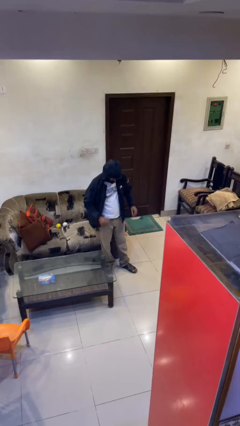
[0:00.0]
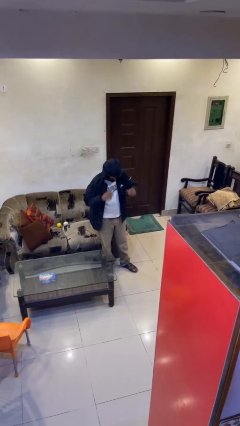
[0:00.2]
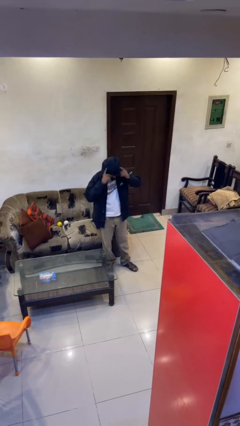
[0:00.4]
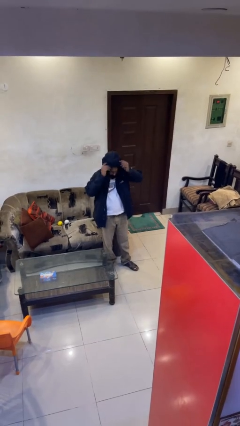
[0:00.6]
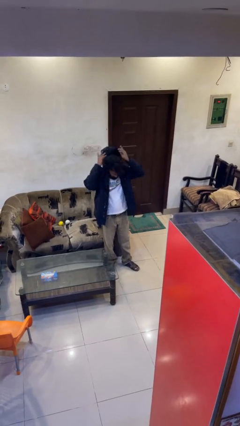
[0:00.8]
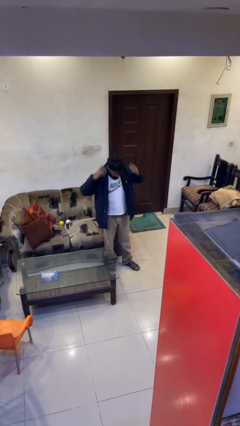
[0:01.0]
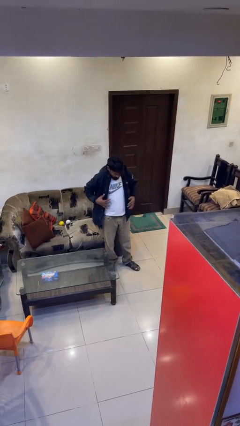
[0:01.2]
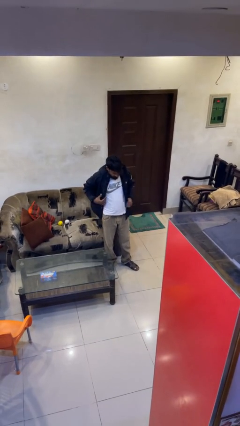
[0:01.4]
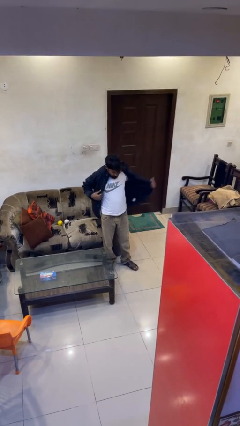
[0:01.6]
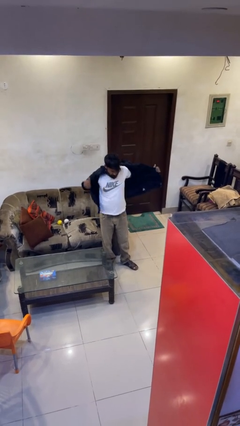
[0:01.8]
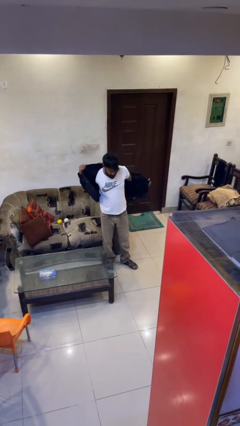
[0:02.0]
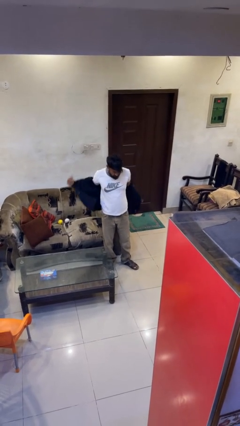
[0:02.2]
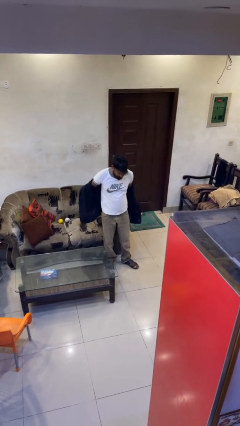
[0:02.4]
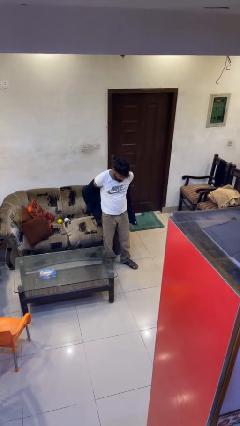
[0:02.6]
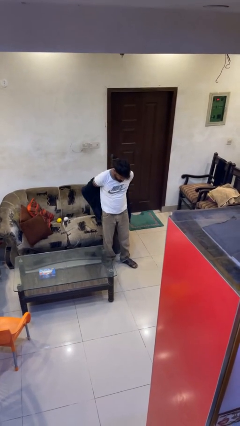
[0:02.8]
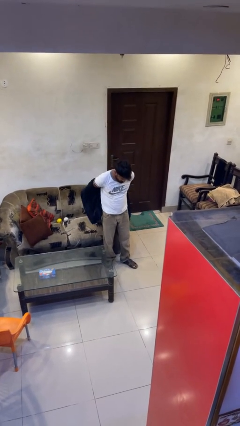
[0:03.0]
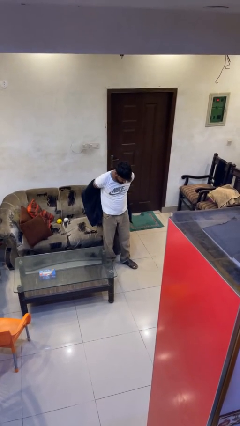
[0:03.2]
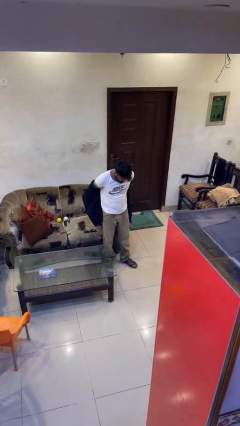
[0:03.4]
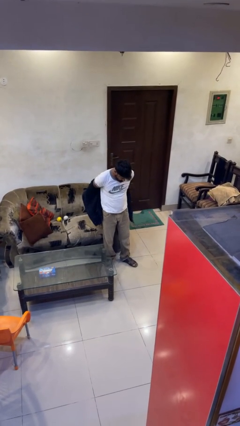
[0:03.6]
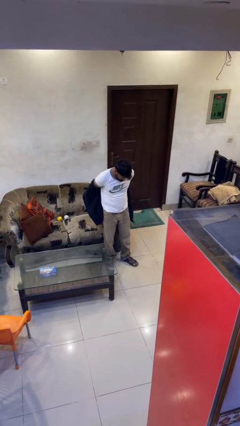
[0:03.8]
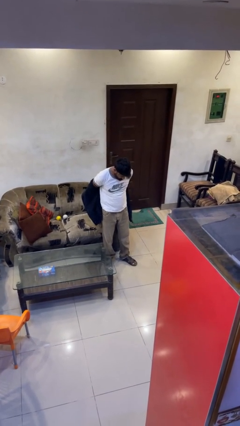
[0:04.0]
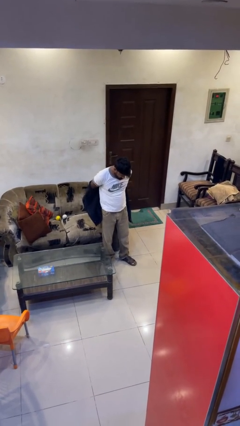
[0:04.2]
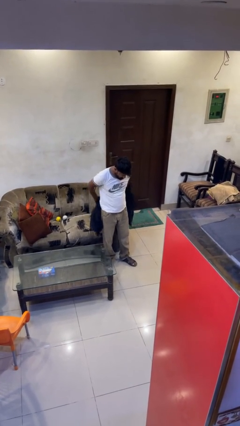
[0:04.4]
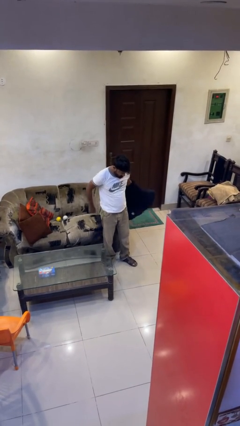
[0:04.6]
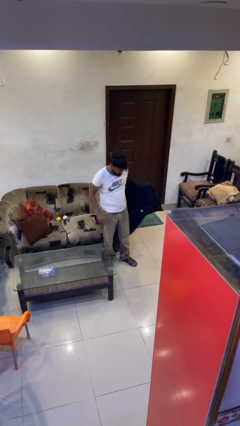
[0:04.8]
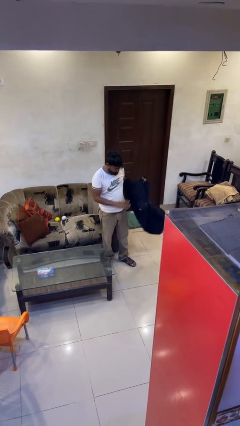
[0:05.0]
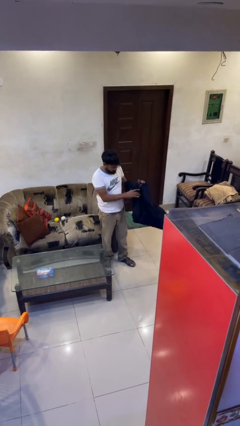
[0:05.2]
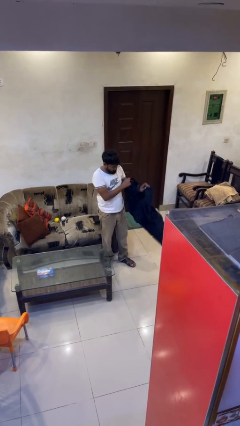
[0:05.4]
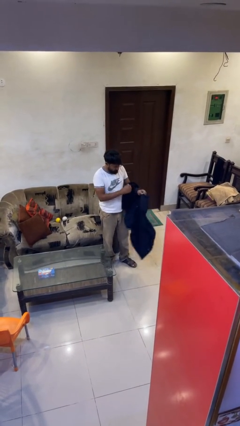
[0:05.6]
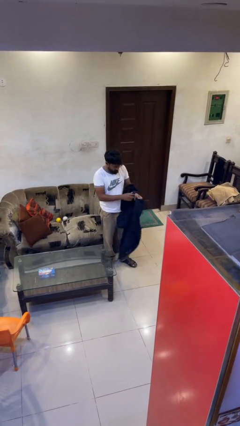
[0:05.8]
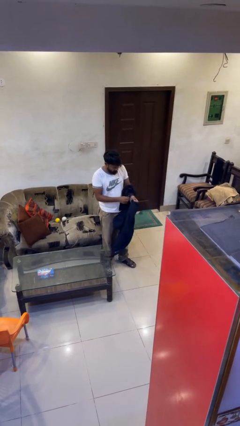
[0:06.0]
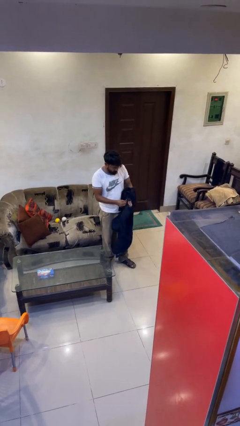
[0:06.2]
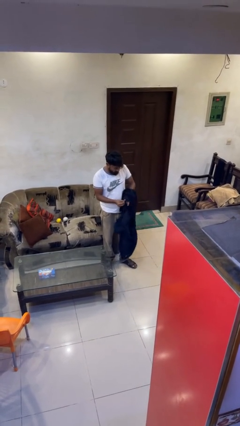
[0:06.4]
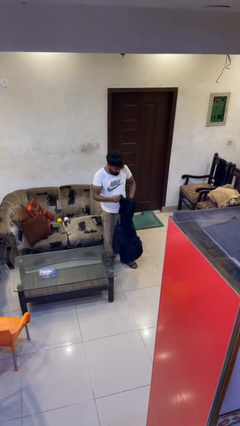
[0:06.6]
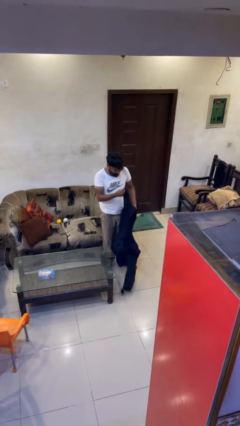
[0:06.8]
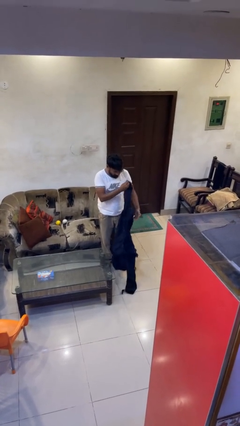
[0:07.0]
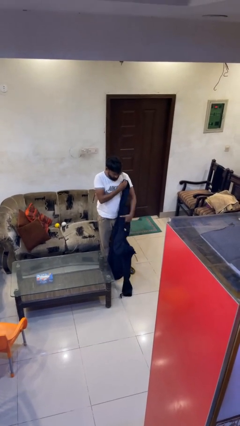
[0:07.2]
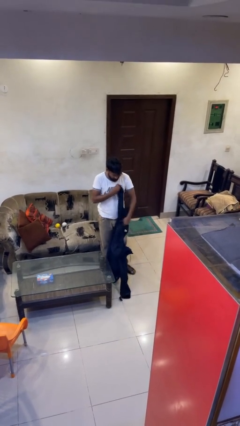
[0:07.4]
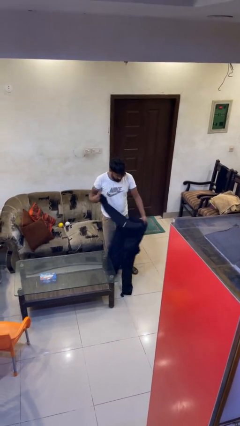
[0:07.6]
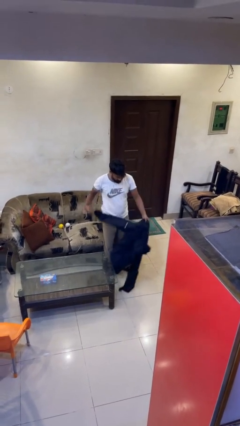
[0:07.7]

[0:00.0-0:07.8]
person takes off hoodie

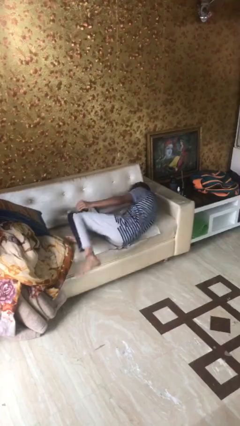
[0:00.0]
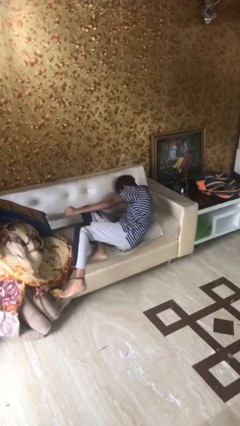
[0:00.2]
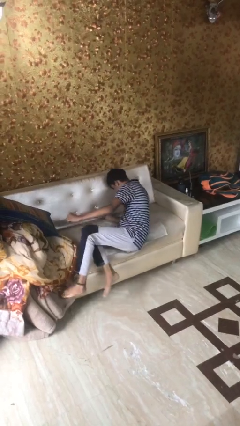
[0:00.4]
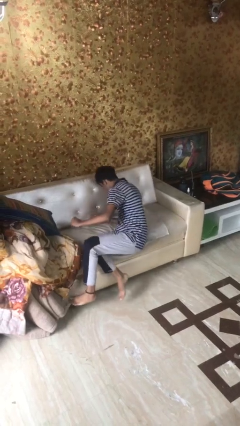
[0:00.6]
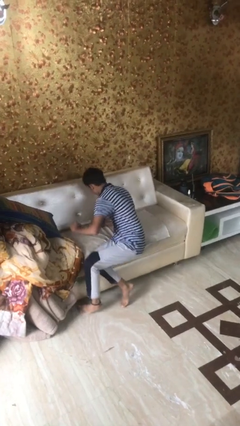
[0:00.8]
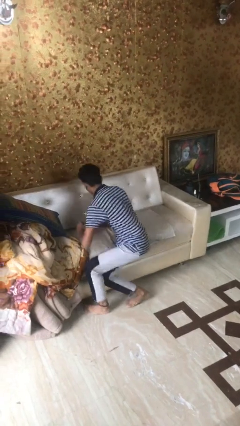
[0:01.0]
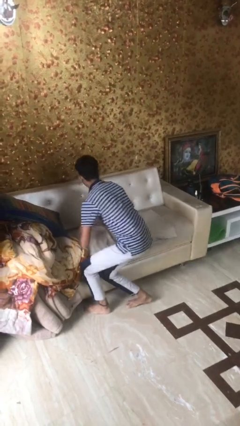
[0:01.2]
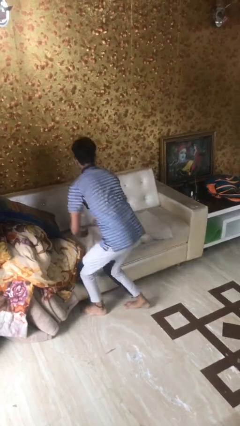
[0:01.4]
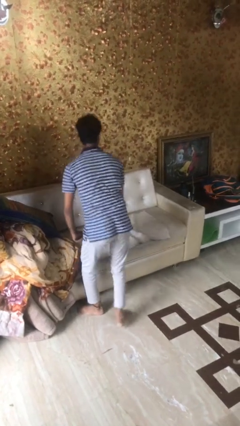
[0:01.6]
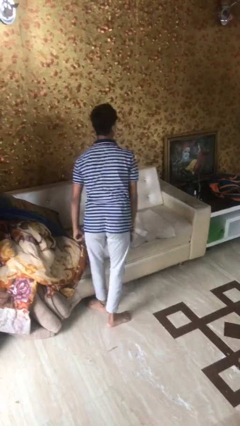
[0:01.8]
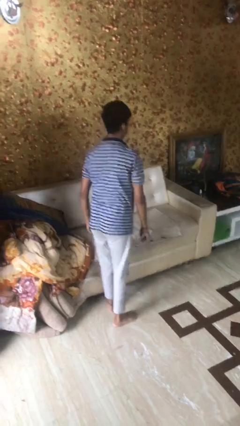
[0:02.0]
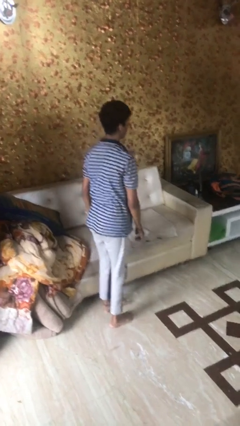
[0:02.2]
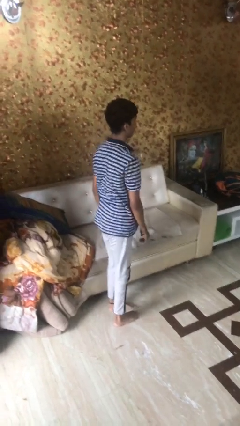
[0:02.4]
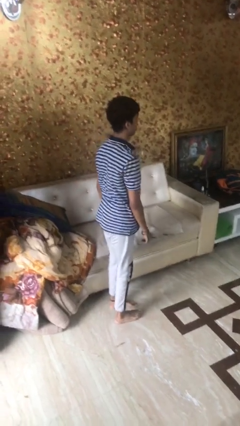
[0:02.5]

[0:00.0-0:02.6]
person stands up

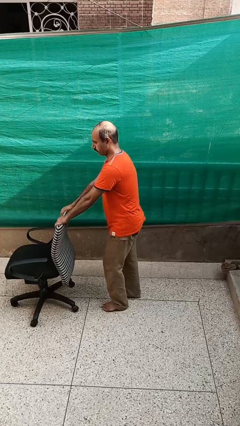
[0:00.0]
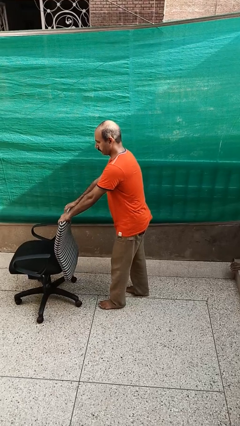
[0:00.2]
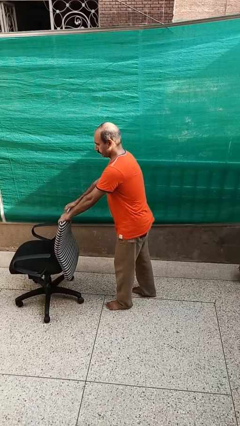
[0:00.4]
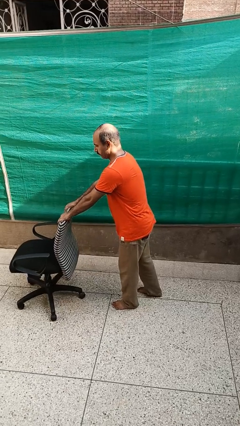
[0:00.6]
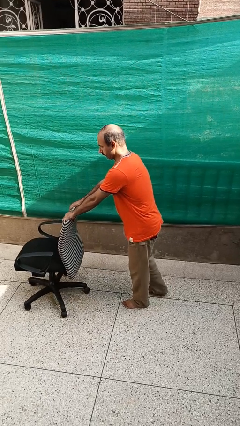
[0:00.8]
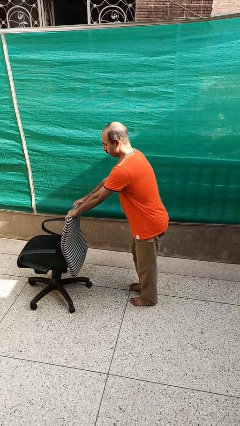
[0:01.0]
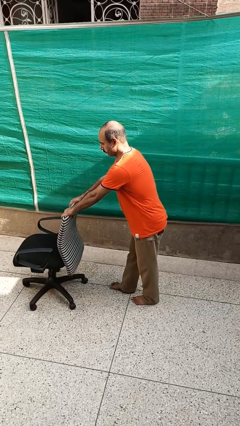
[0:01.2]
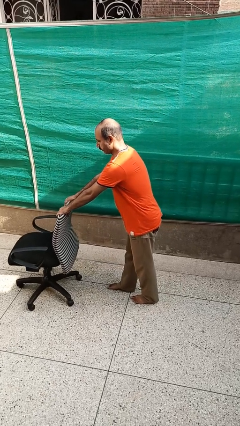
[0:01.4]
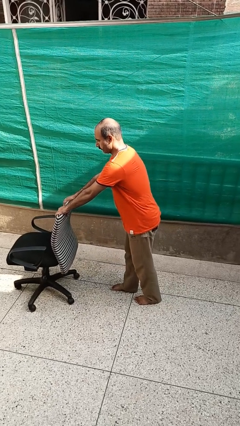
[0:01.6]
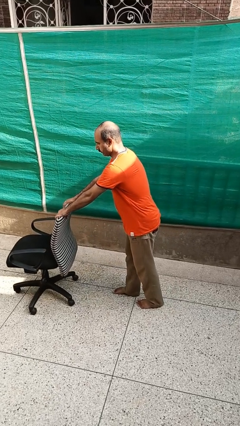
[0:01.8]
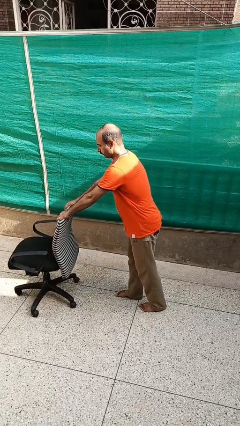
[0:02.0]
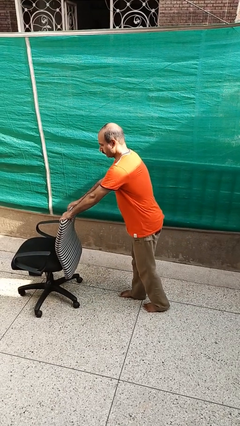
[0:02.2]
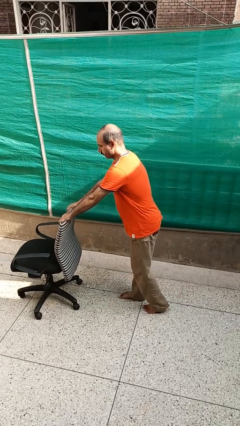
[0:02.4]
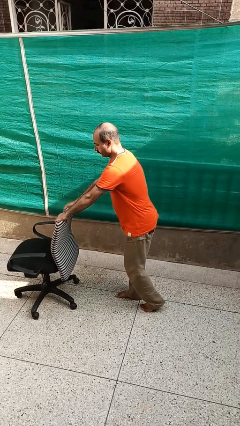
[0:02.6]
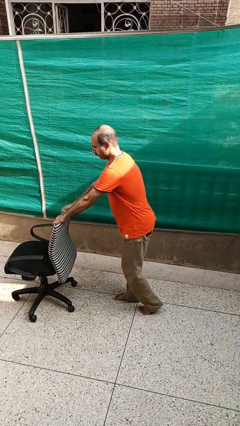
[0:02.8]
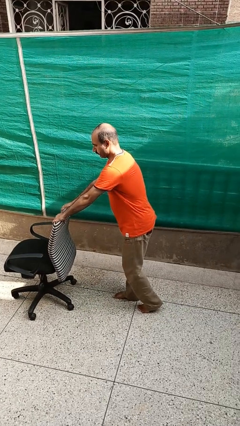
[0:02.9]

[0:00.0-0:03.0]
person pushes wheeled cart

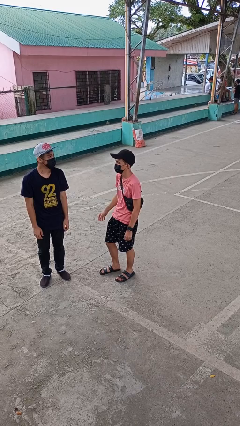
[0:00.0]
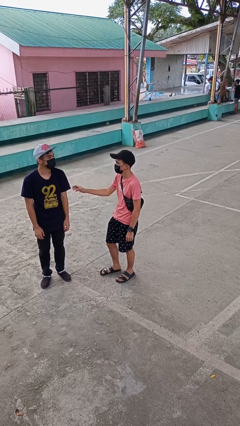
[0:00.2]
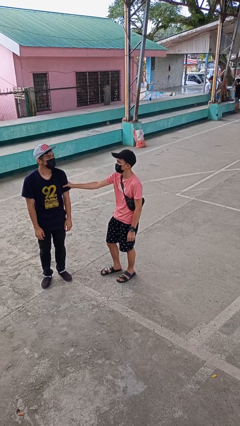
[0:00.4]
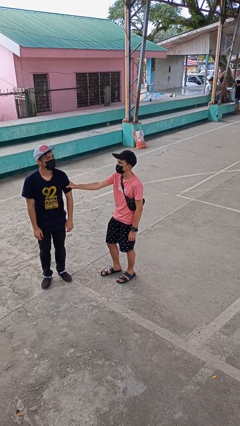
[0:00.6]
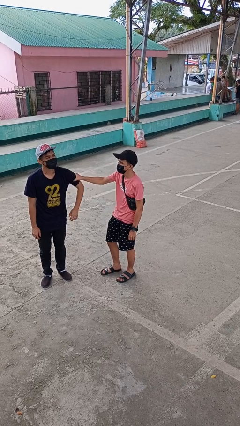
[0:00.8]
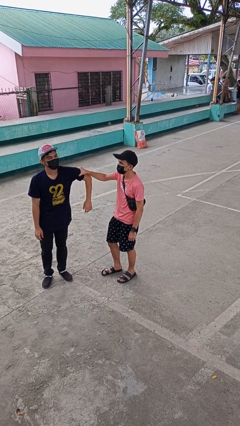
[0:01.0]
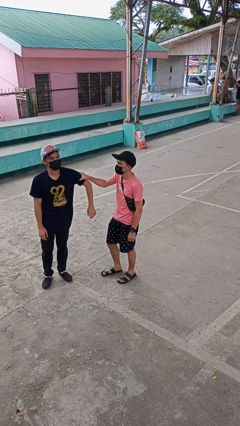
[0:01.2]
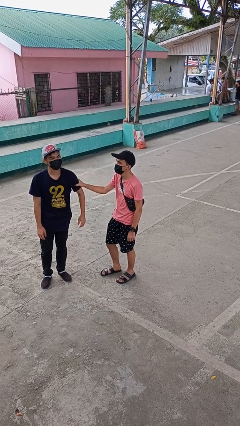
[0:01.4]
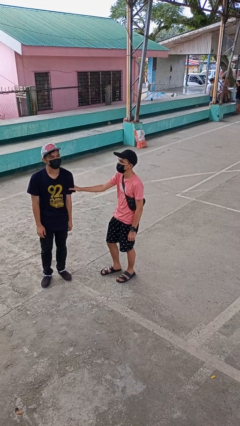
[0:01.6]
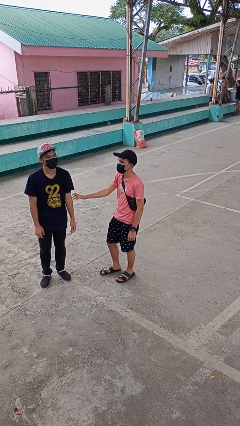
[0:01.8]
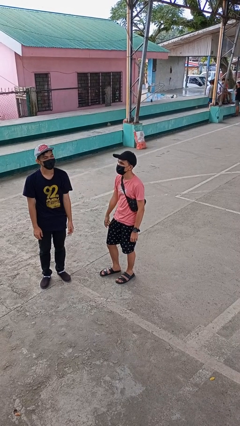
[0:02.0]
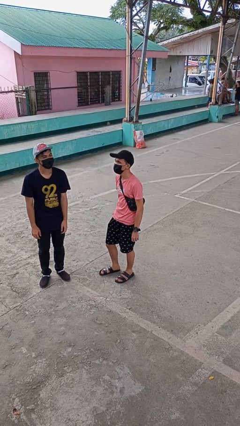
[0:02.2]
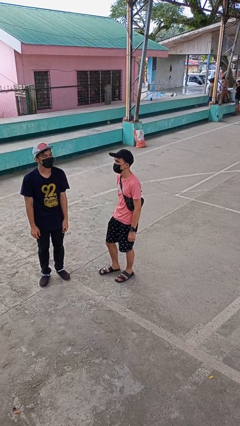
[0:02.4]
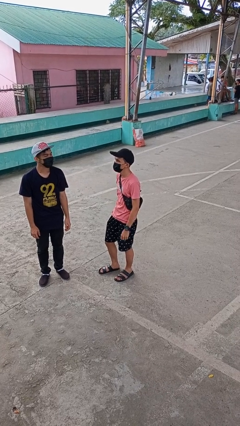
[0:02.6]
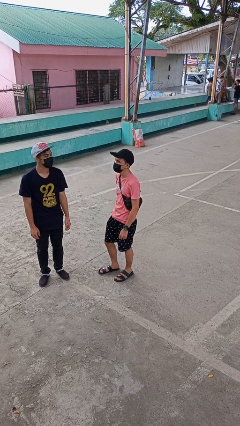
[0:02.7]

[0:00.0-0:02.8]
person grabs person by bicep

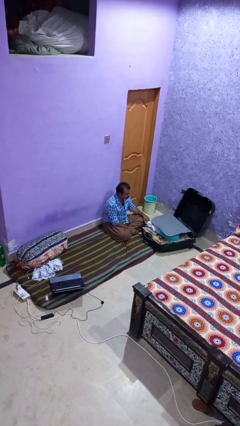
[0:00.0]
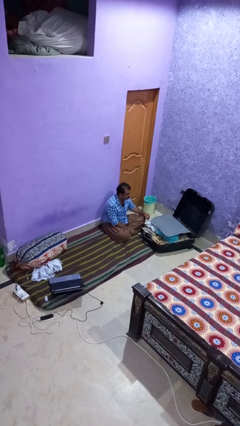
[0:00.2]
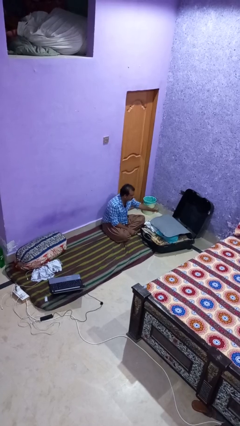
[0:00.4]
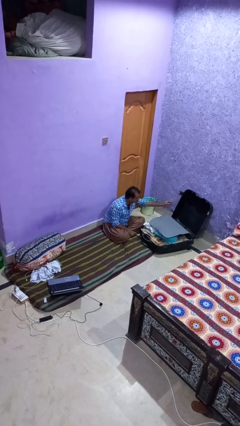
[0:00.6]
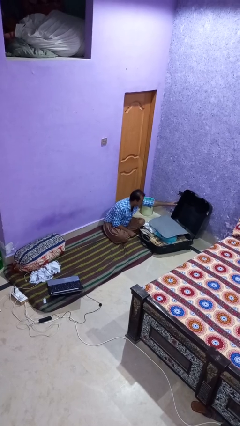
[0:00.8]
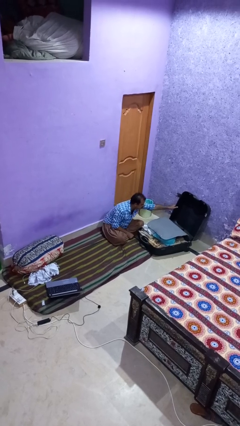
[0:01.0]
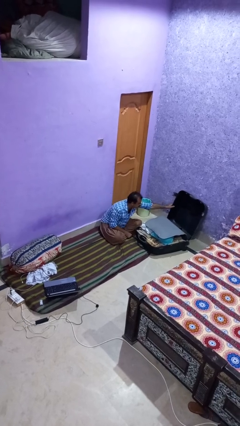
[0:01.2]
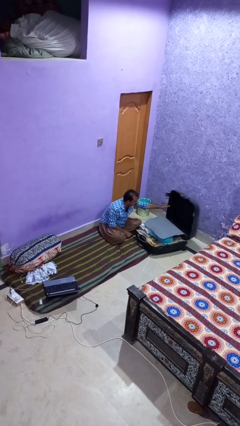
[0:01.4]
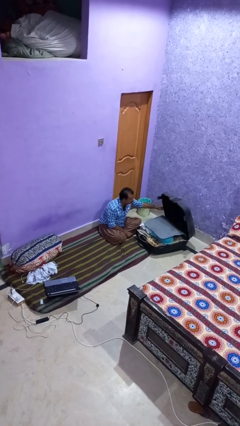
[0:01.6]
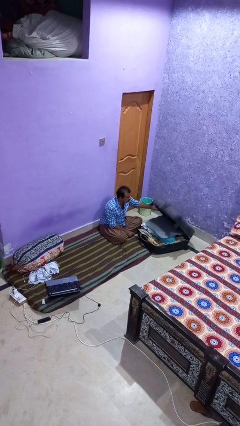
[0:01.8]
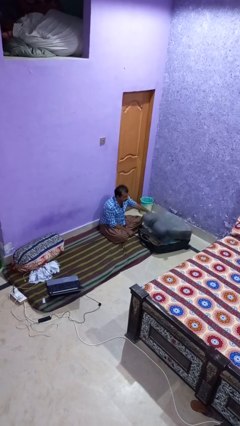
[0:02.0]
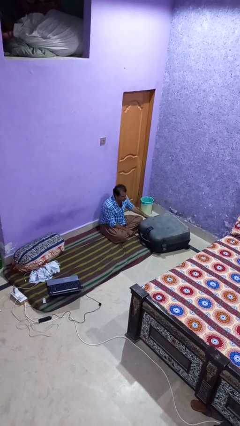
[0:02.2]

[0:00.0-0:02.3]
person closes suitcase
